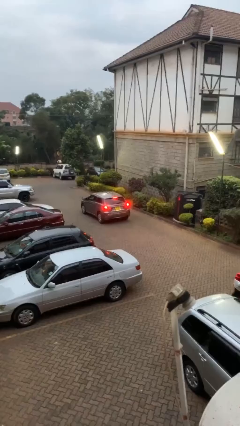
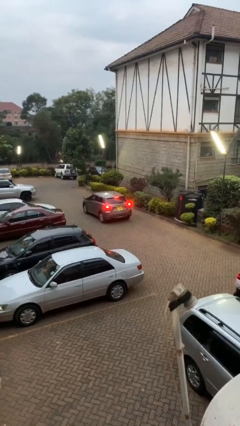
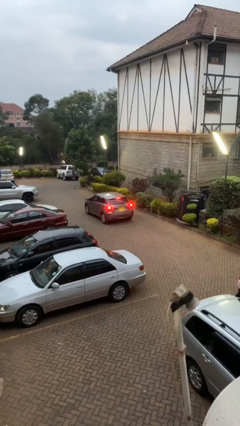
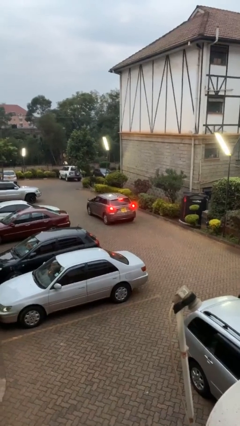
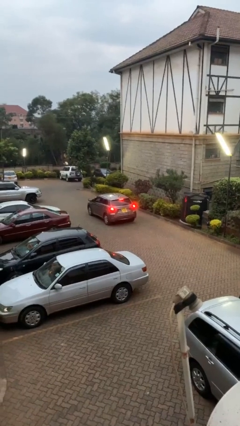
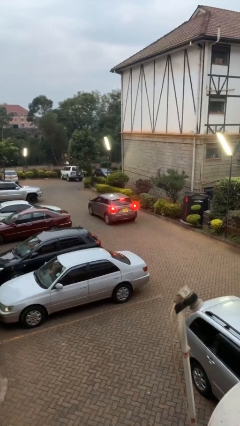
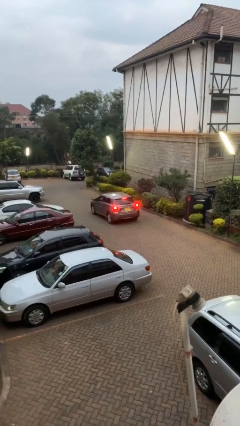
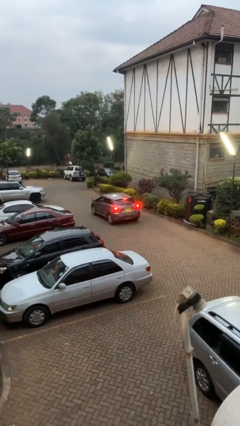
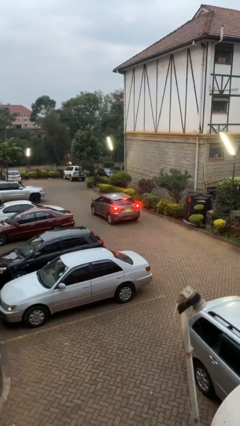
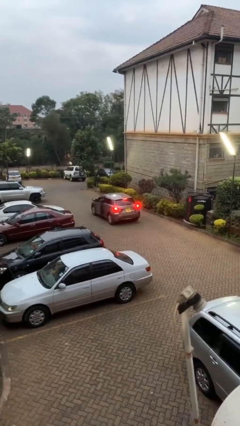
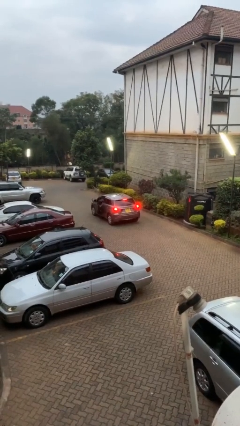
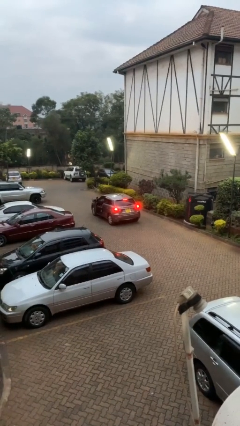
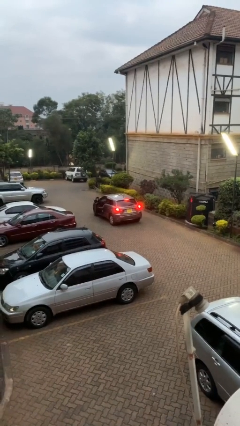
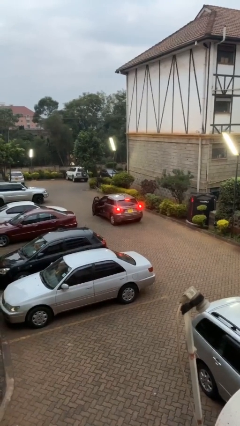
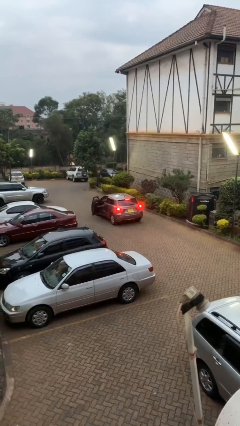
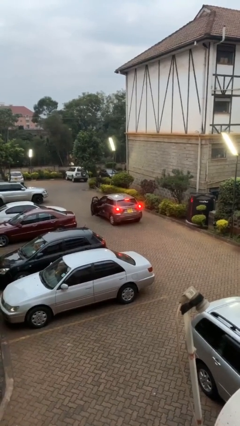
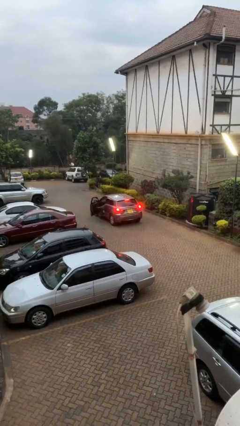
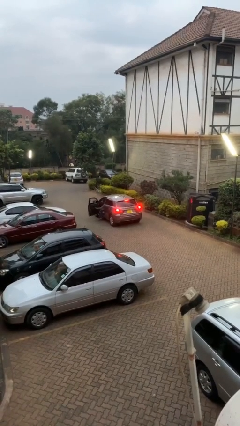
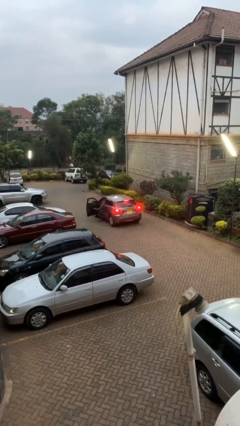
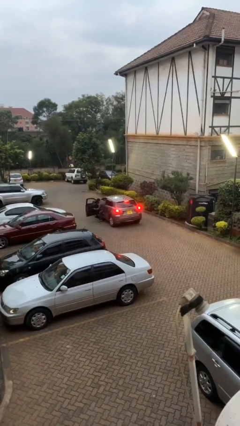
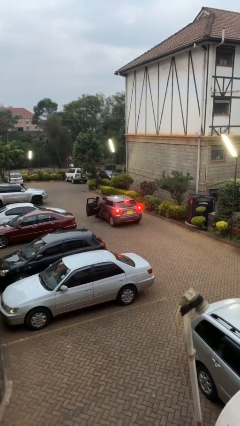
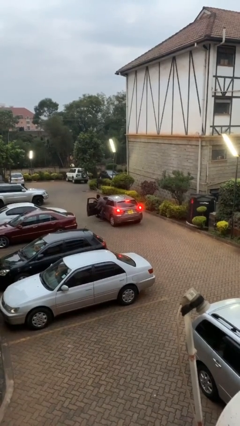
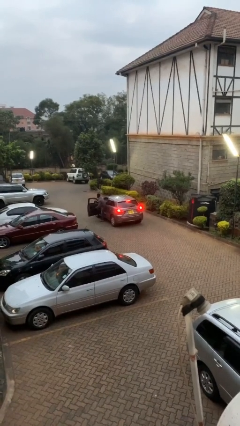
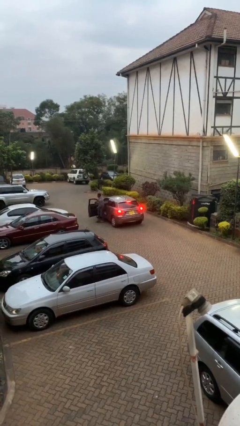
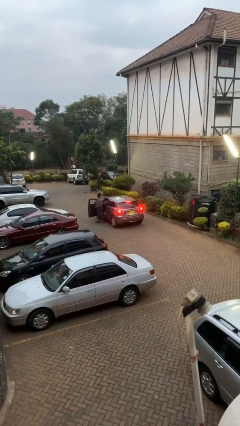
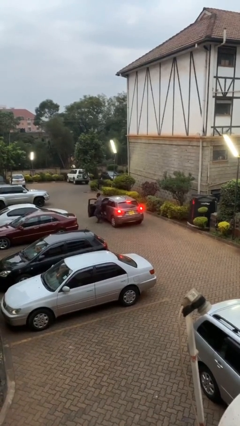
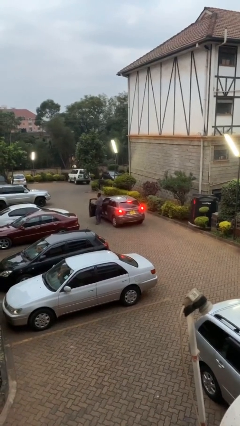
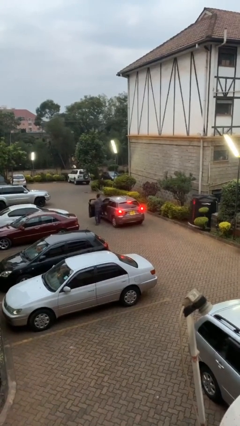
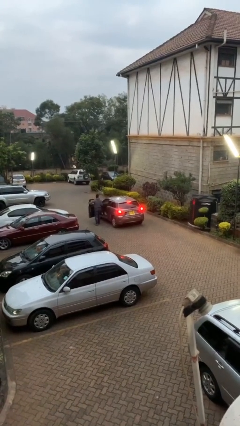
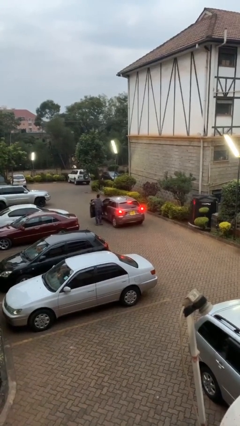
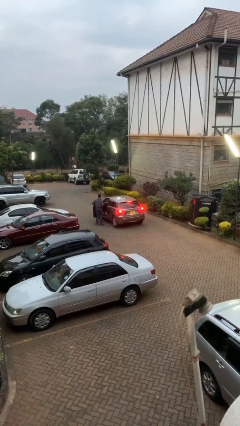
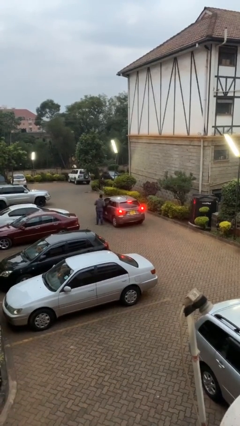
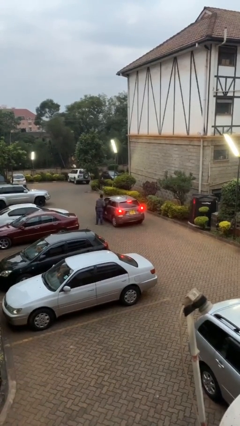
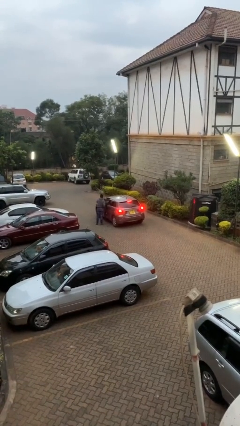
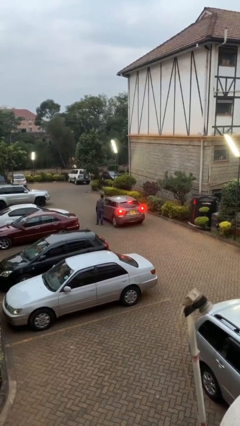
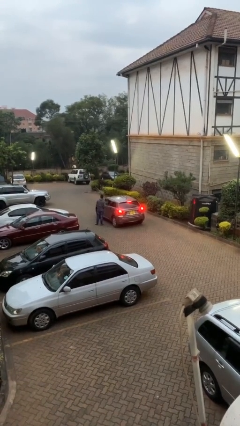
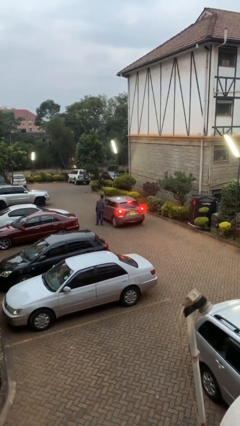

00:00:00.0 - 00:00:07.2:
car drops off person

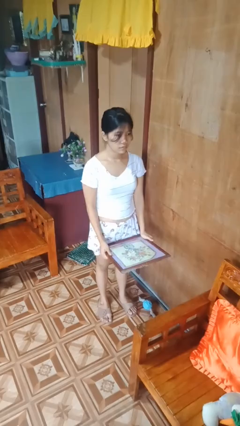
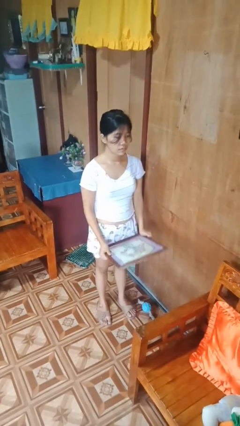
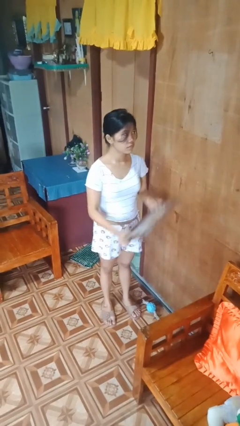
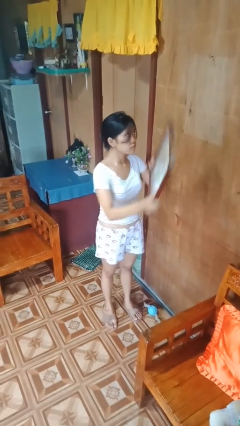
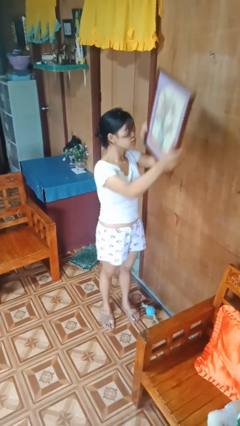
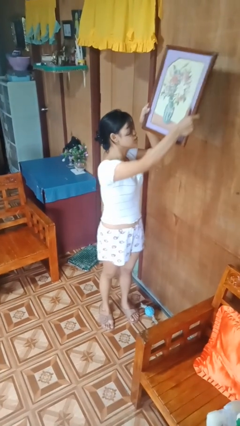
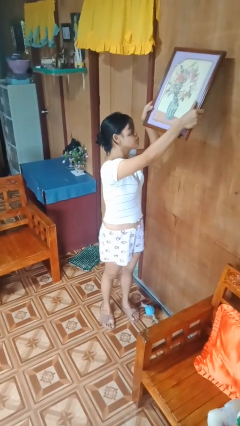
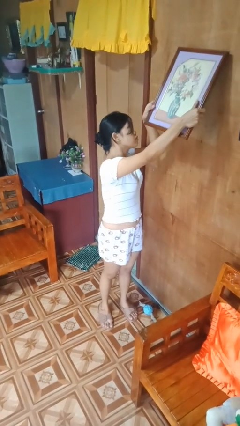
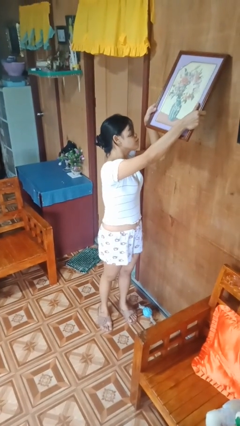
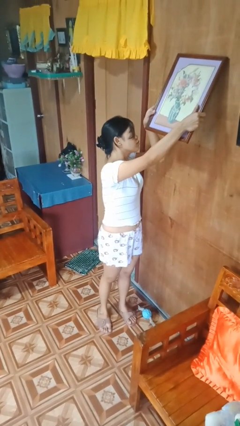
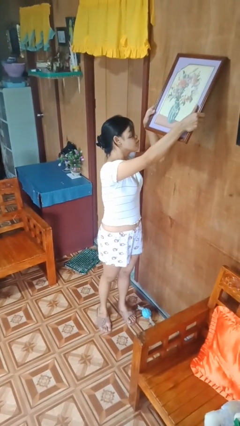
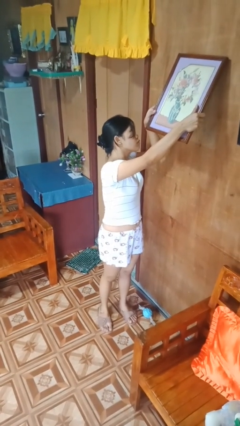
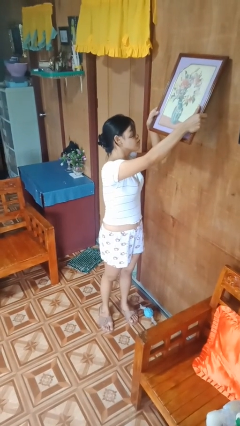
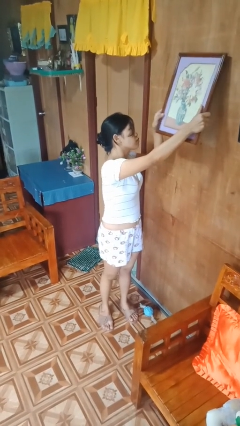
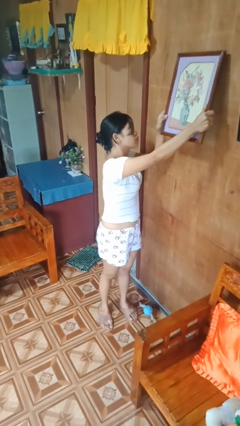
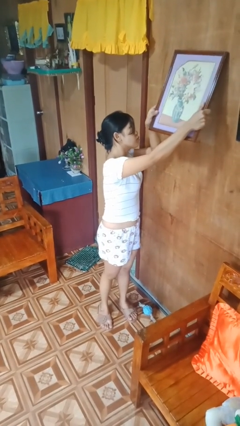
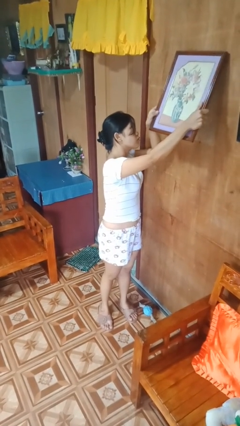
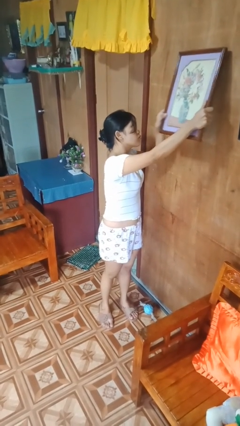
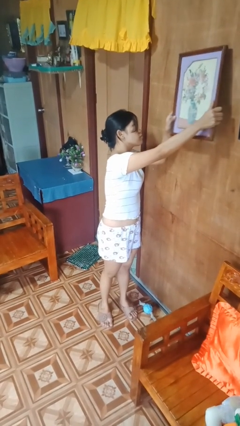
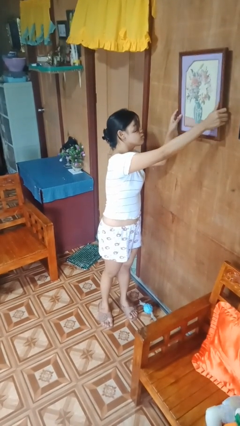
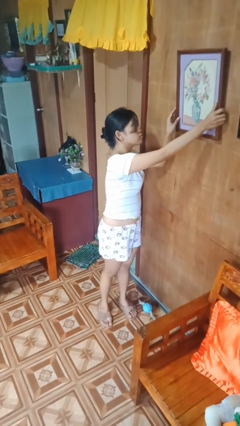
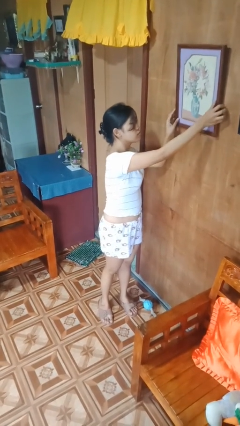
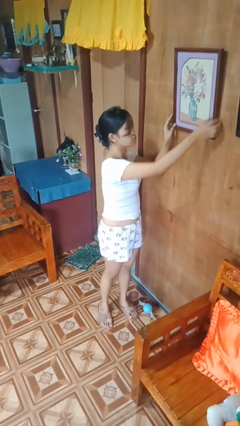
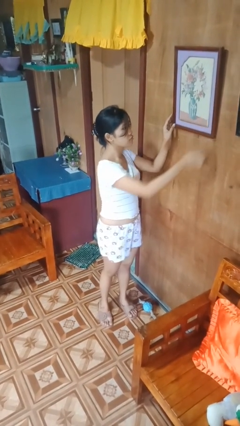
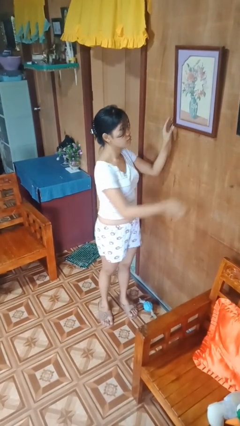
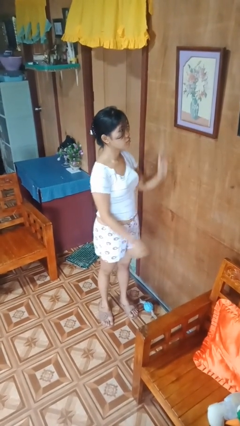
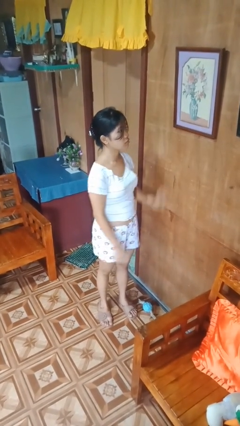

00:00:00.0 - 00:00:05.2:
person puts up picture frame

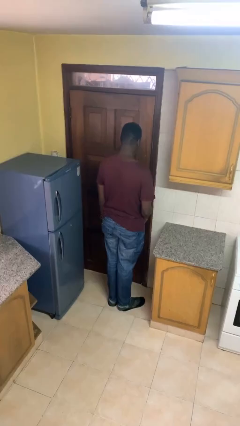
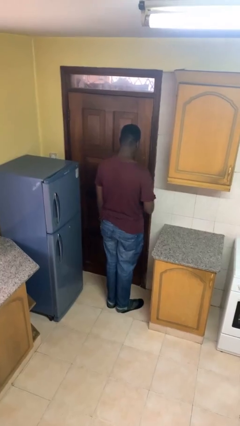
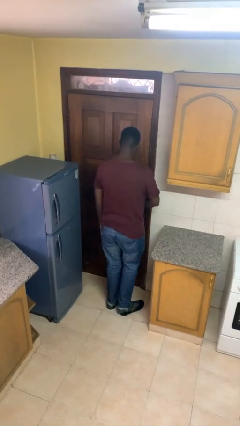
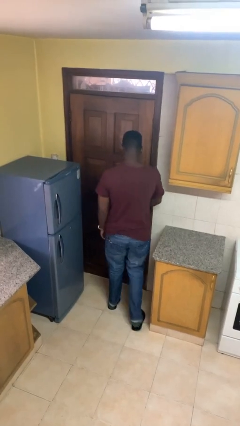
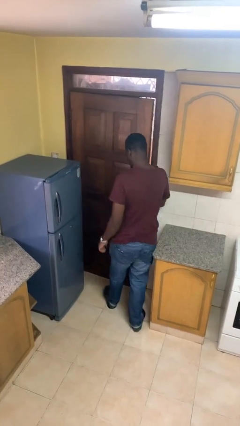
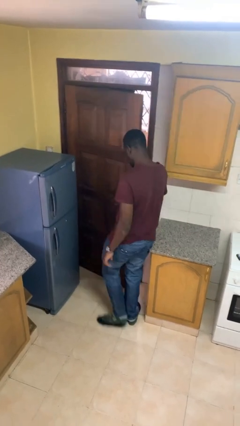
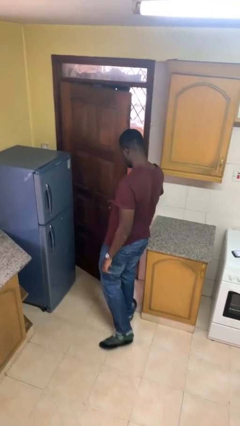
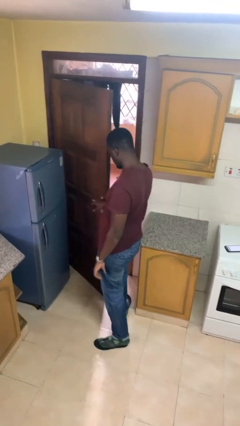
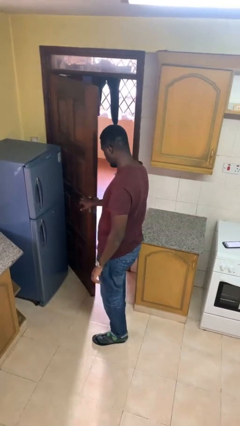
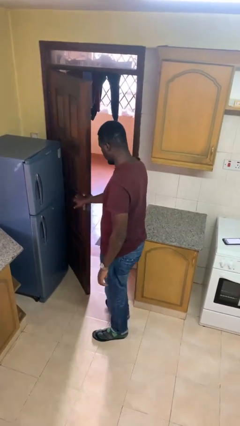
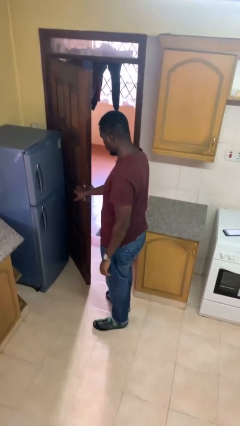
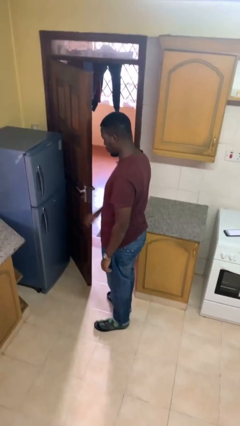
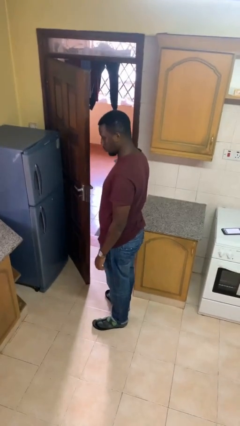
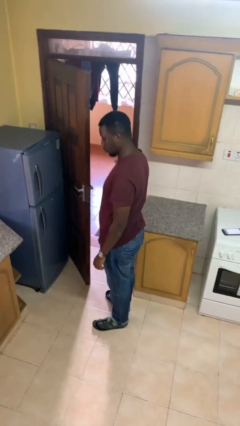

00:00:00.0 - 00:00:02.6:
person opens facility door

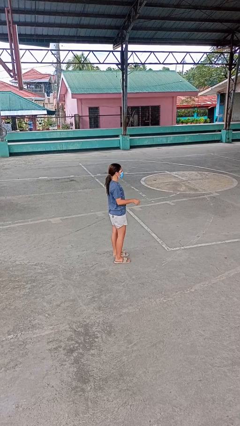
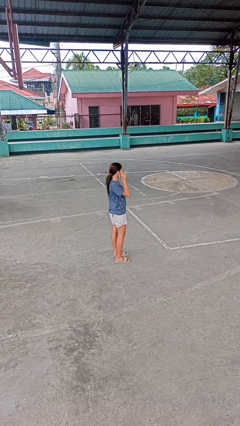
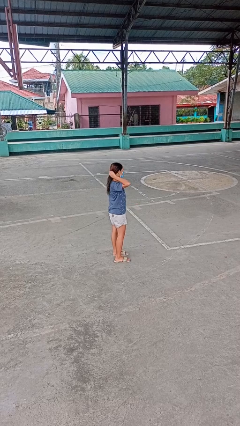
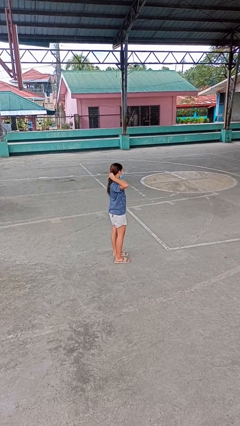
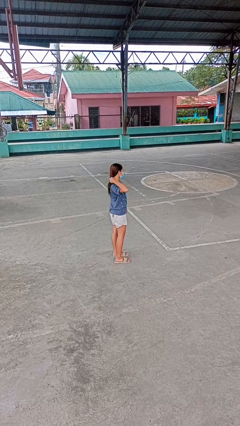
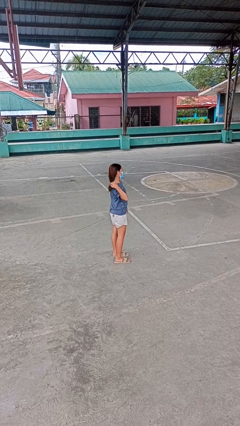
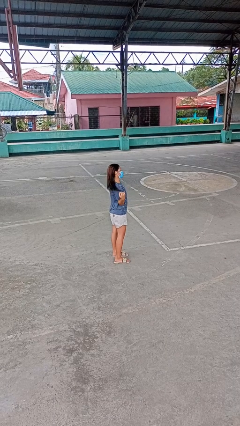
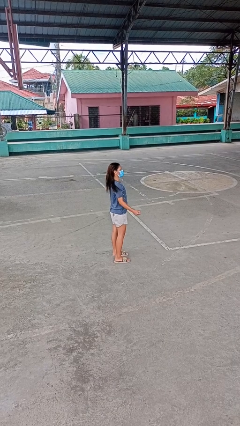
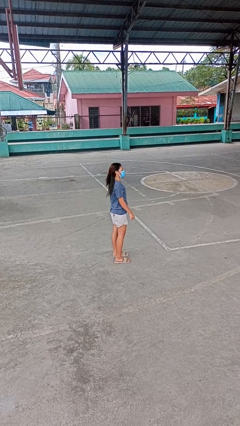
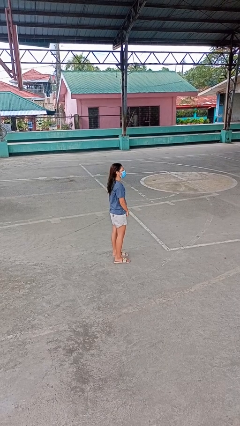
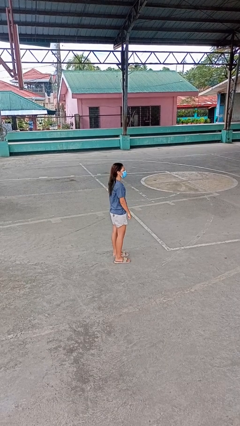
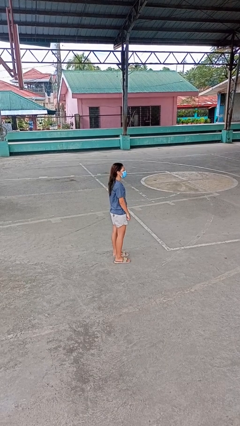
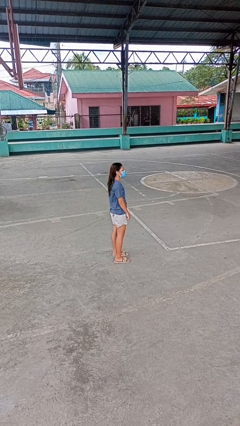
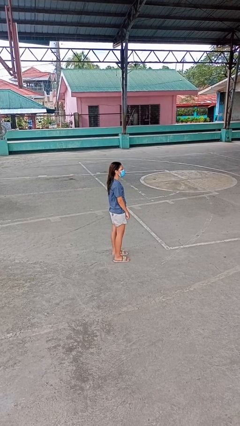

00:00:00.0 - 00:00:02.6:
person takes off hairtie
